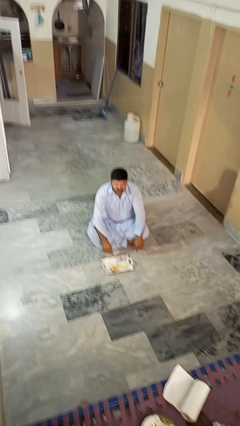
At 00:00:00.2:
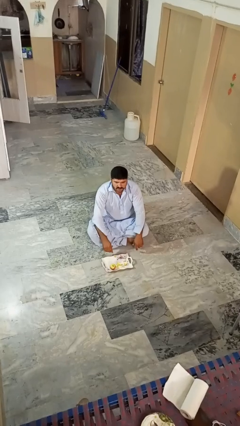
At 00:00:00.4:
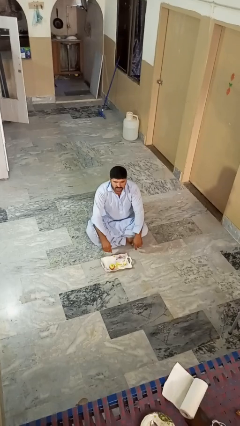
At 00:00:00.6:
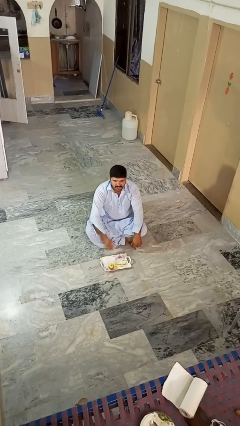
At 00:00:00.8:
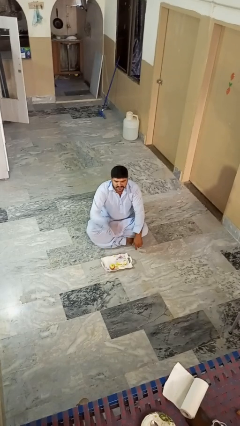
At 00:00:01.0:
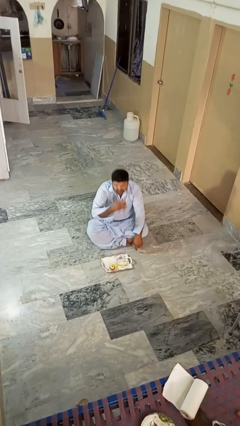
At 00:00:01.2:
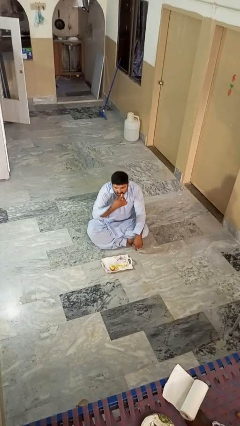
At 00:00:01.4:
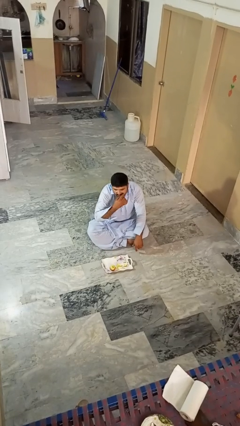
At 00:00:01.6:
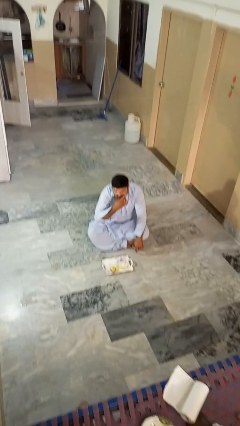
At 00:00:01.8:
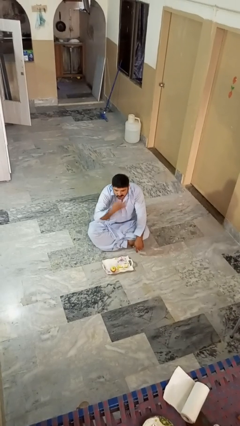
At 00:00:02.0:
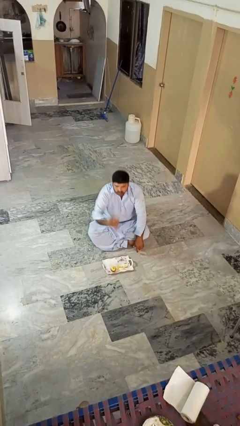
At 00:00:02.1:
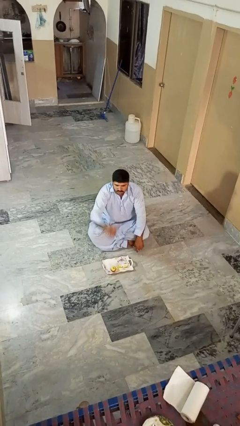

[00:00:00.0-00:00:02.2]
person eats apple

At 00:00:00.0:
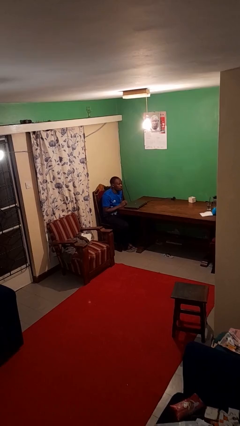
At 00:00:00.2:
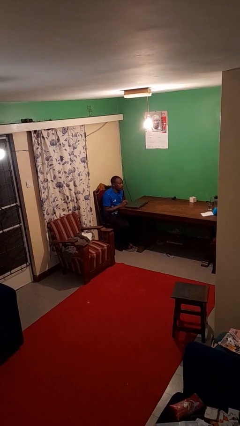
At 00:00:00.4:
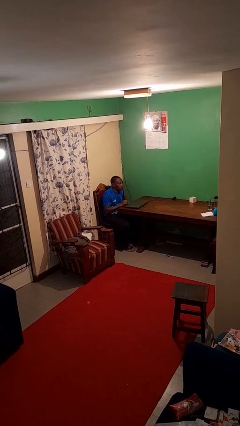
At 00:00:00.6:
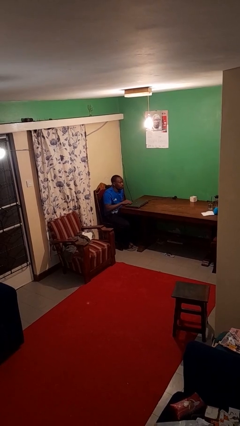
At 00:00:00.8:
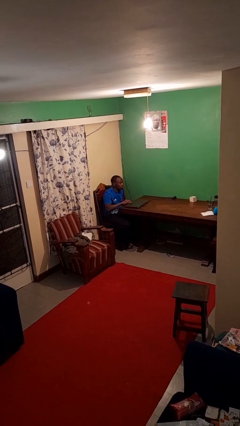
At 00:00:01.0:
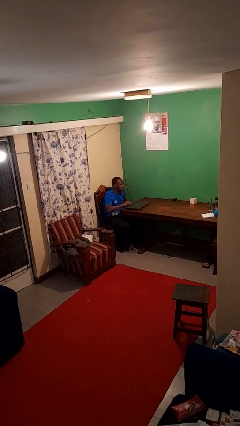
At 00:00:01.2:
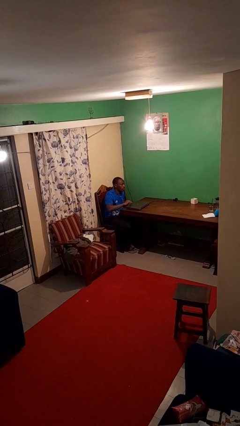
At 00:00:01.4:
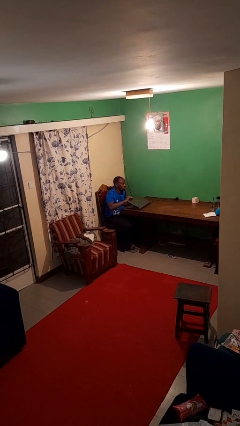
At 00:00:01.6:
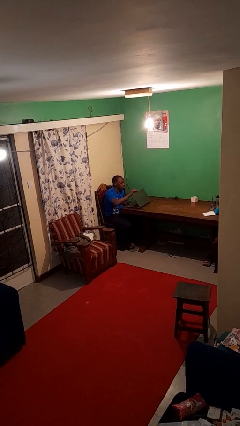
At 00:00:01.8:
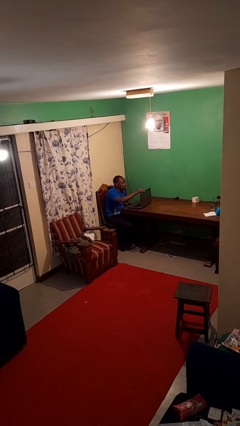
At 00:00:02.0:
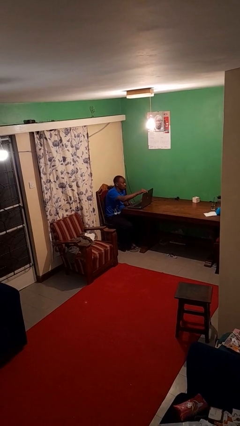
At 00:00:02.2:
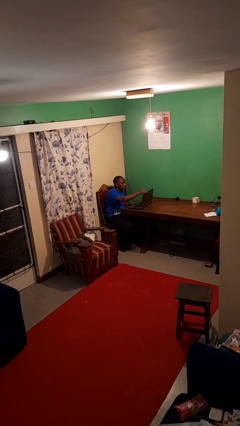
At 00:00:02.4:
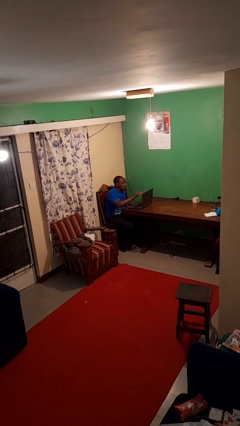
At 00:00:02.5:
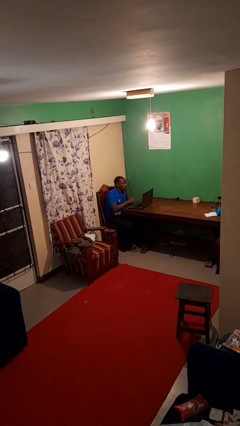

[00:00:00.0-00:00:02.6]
person opens laptop

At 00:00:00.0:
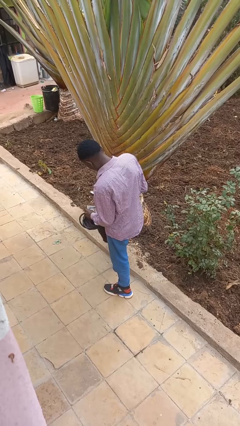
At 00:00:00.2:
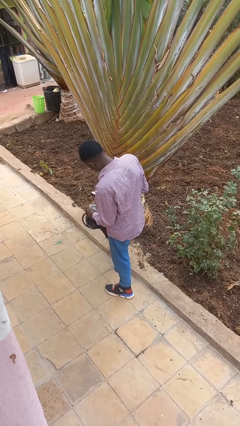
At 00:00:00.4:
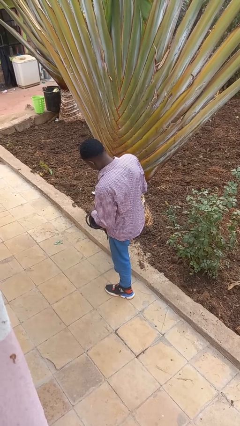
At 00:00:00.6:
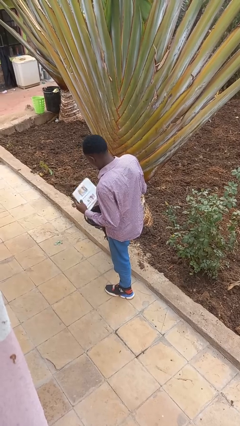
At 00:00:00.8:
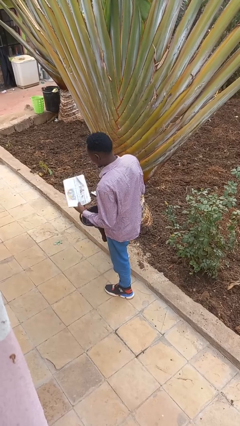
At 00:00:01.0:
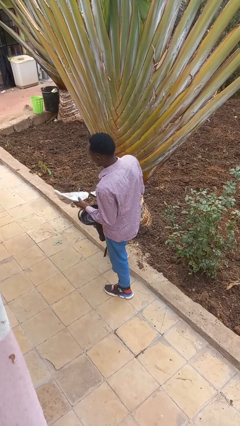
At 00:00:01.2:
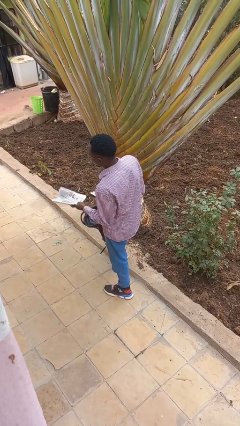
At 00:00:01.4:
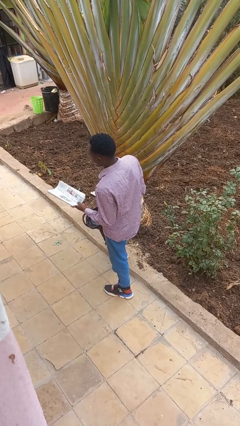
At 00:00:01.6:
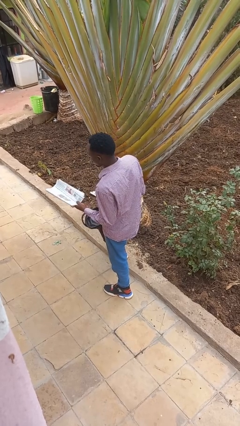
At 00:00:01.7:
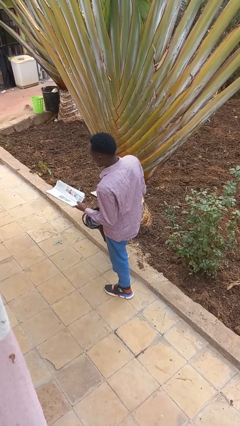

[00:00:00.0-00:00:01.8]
person takes object from backpack

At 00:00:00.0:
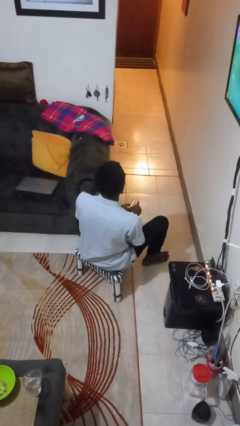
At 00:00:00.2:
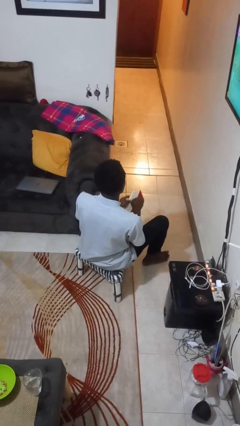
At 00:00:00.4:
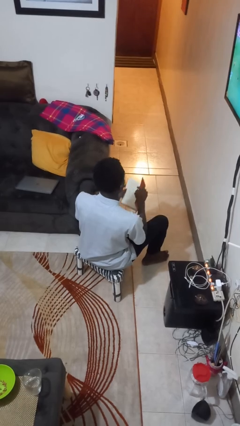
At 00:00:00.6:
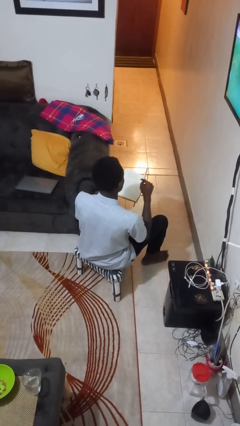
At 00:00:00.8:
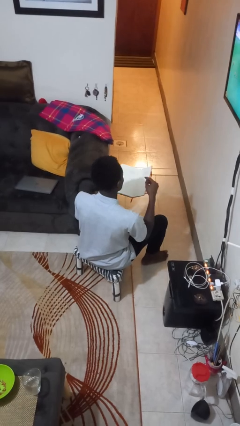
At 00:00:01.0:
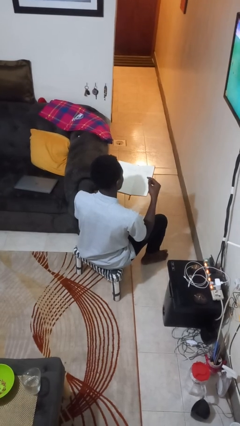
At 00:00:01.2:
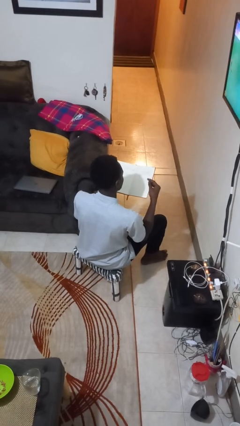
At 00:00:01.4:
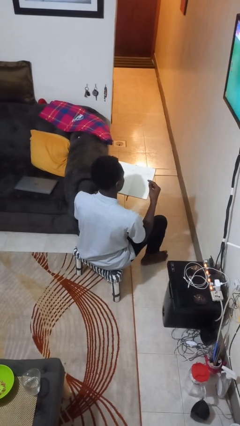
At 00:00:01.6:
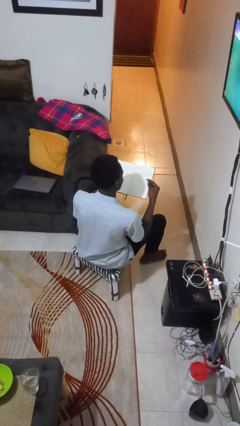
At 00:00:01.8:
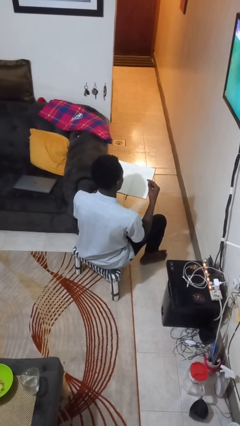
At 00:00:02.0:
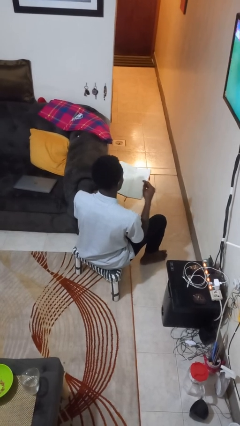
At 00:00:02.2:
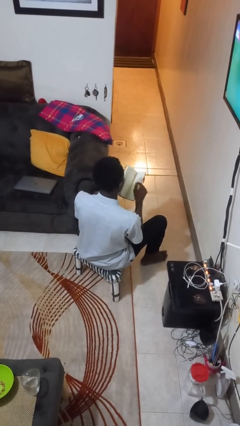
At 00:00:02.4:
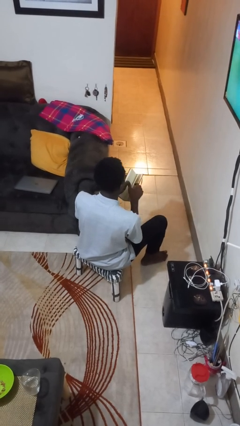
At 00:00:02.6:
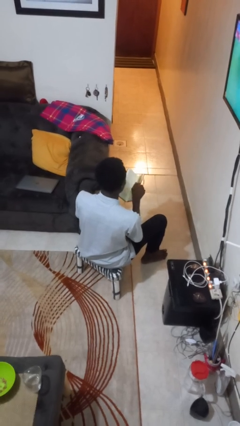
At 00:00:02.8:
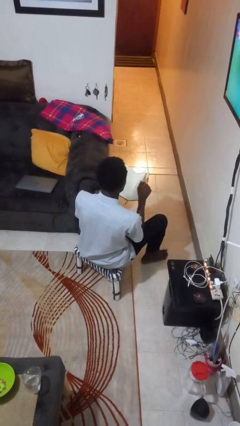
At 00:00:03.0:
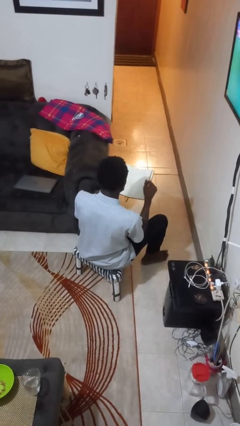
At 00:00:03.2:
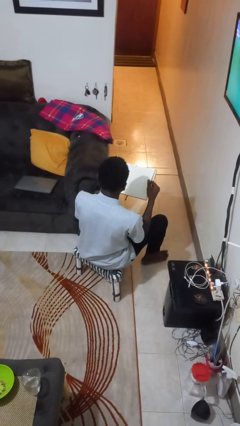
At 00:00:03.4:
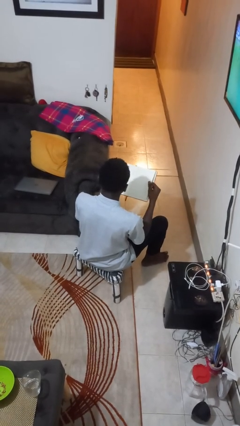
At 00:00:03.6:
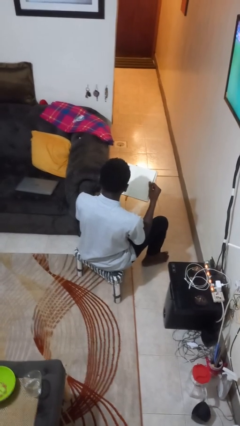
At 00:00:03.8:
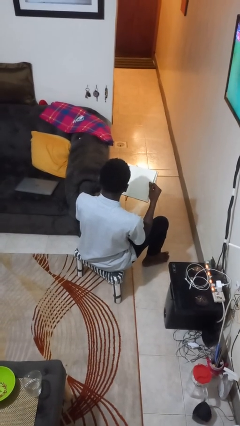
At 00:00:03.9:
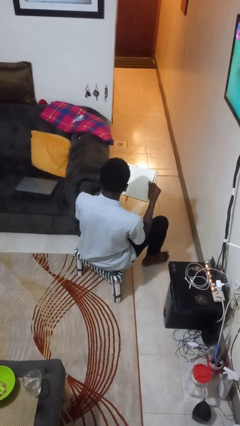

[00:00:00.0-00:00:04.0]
person reads book

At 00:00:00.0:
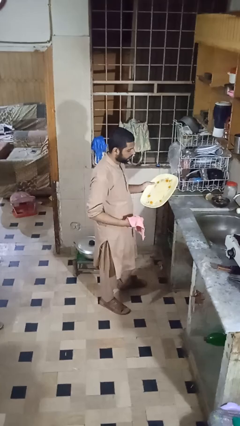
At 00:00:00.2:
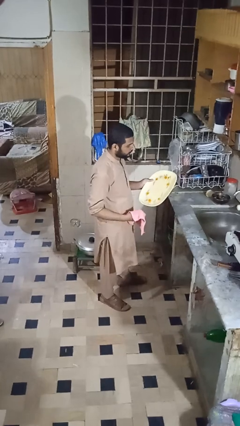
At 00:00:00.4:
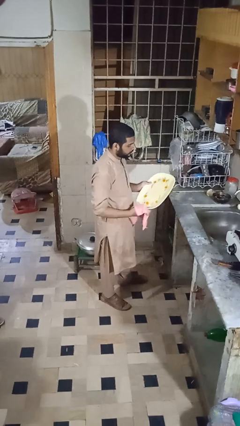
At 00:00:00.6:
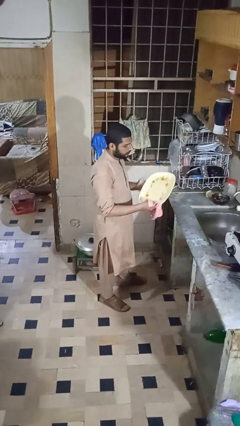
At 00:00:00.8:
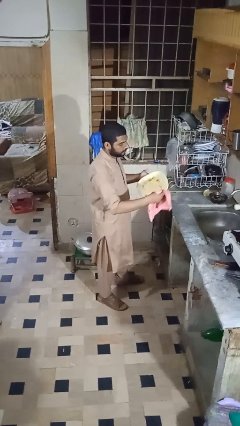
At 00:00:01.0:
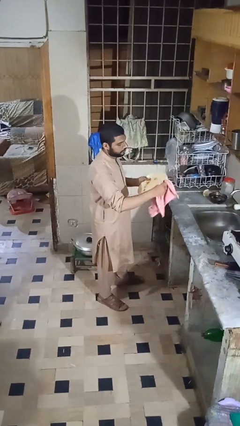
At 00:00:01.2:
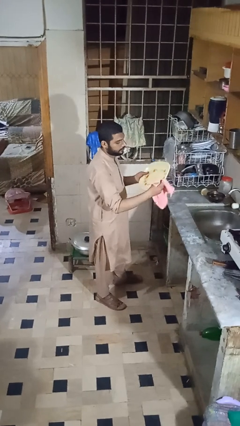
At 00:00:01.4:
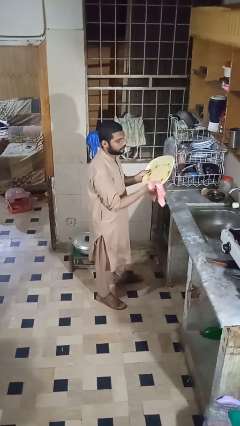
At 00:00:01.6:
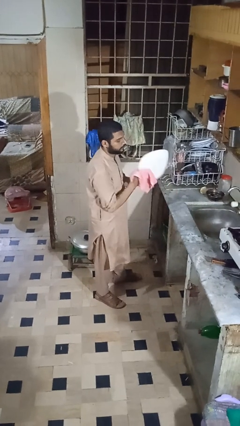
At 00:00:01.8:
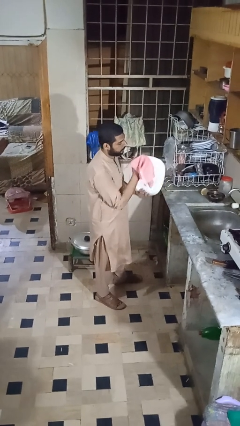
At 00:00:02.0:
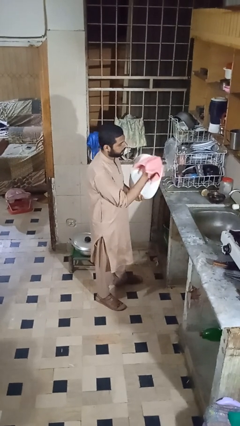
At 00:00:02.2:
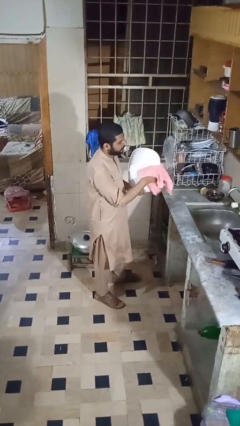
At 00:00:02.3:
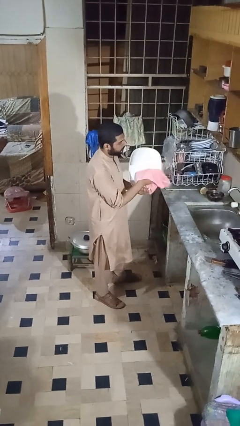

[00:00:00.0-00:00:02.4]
person dries dish

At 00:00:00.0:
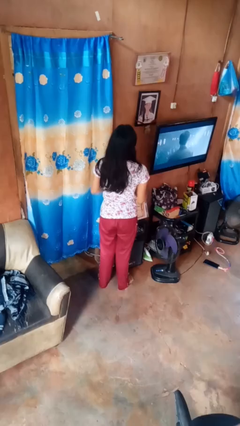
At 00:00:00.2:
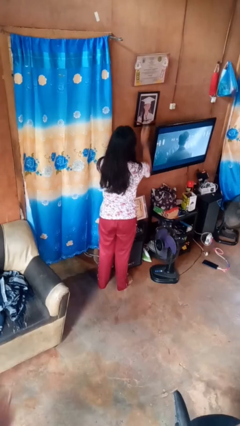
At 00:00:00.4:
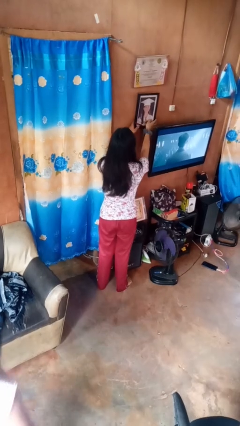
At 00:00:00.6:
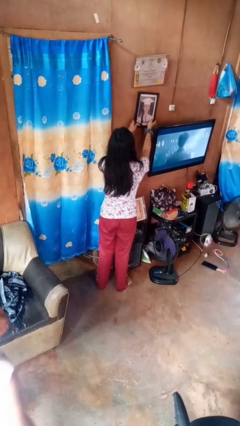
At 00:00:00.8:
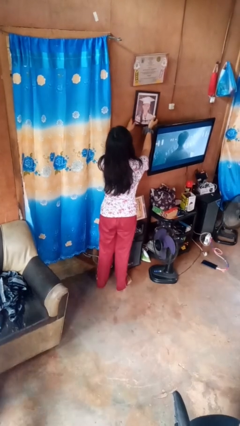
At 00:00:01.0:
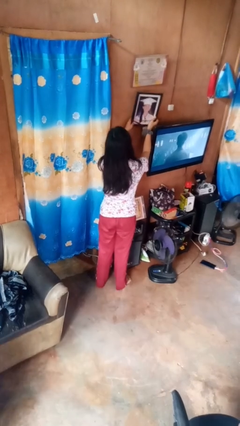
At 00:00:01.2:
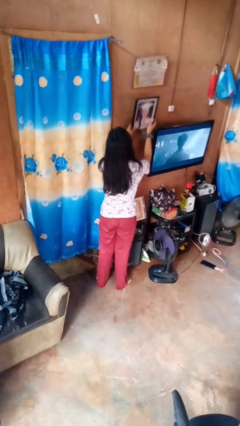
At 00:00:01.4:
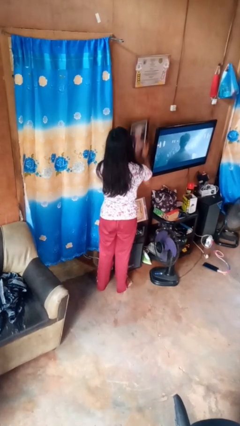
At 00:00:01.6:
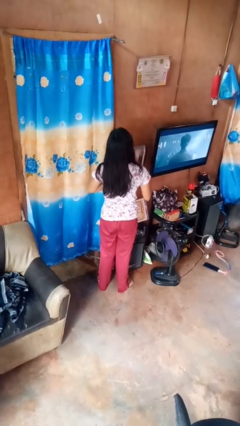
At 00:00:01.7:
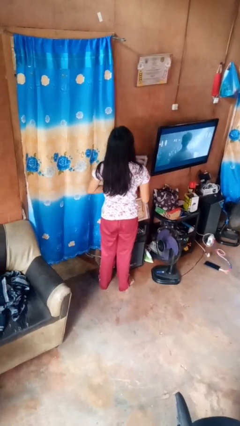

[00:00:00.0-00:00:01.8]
person takes down picture frame

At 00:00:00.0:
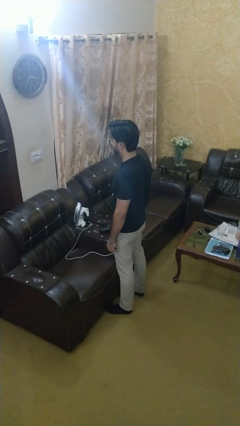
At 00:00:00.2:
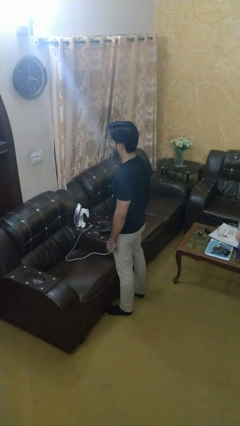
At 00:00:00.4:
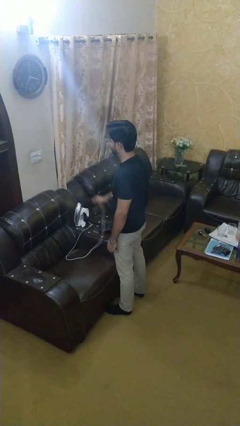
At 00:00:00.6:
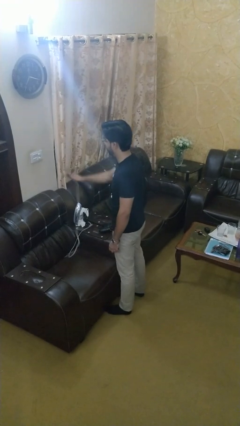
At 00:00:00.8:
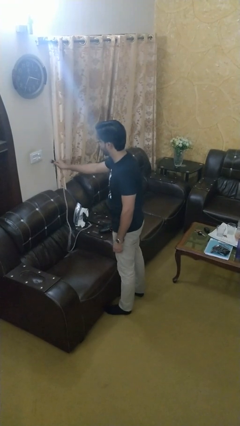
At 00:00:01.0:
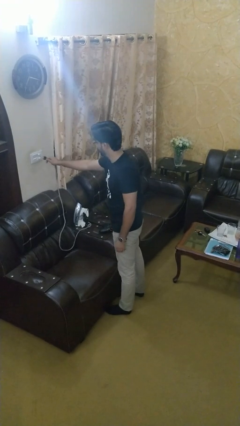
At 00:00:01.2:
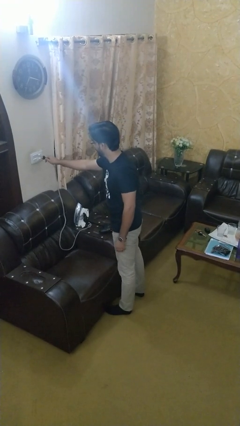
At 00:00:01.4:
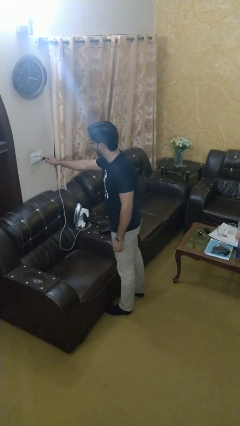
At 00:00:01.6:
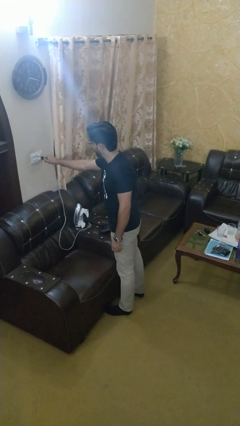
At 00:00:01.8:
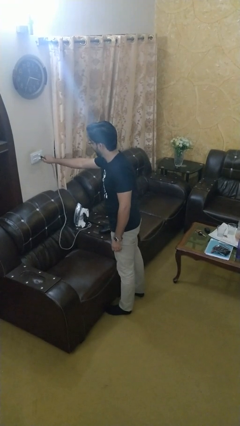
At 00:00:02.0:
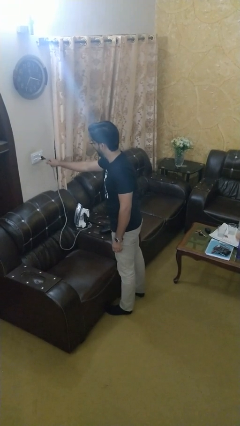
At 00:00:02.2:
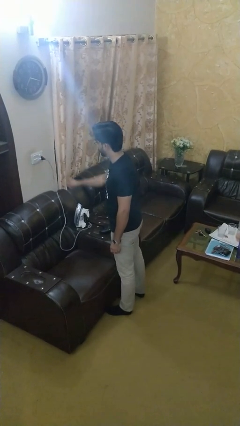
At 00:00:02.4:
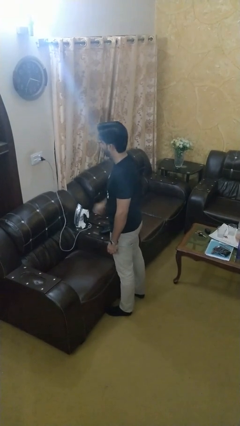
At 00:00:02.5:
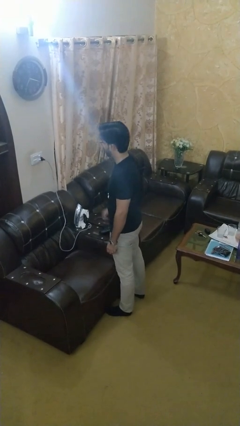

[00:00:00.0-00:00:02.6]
person plugs into electrical socket
